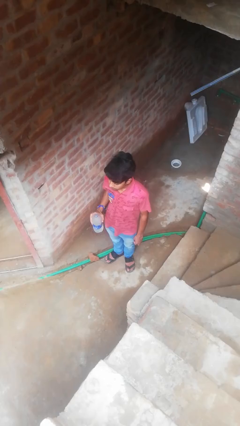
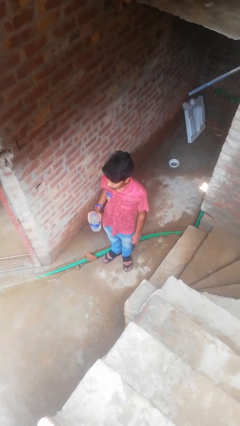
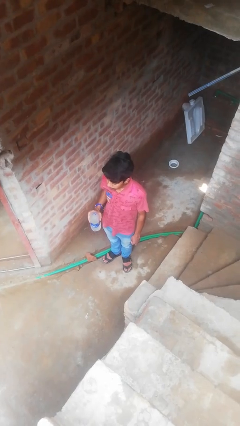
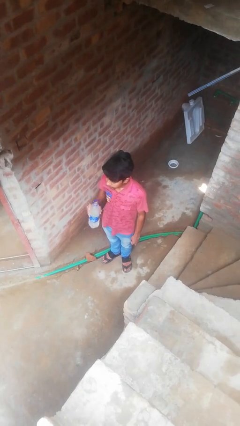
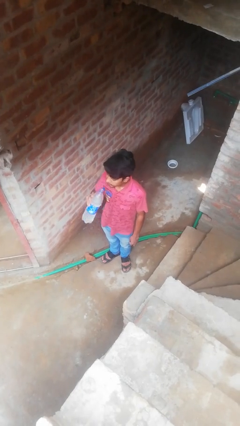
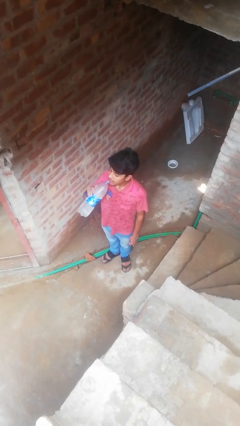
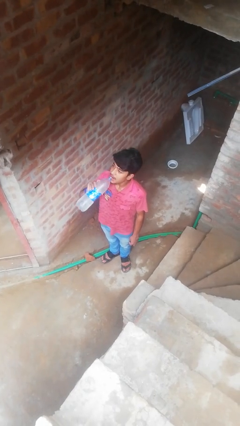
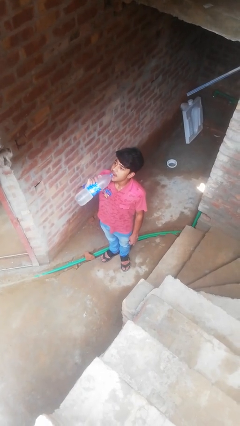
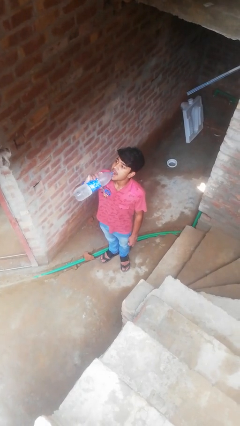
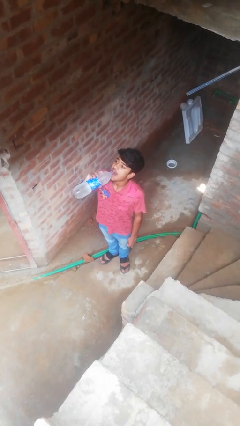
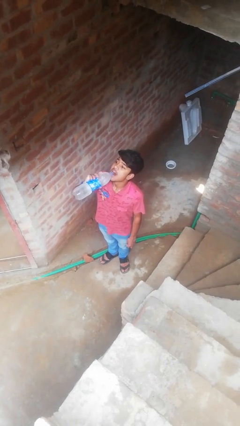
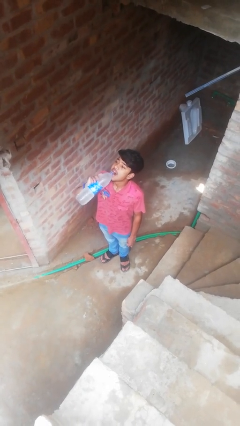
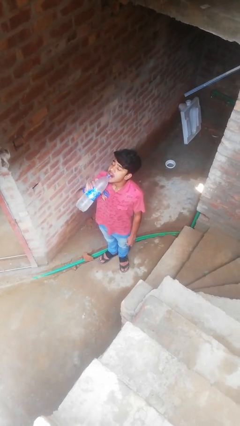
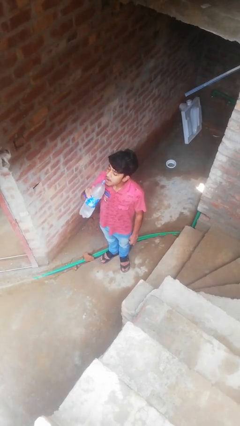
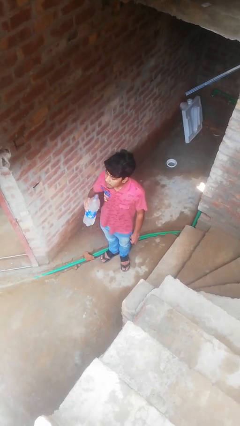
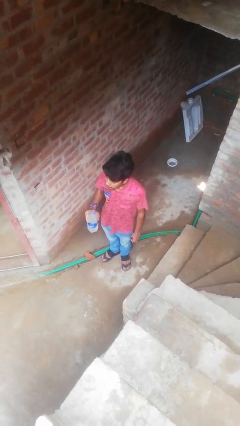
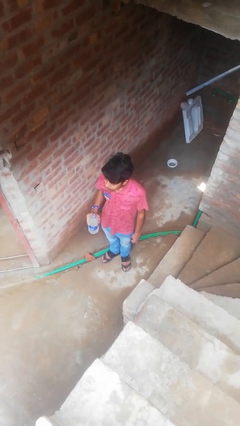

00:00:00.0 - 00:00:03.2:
person drinks from bottle

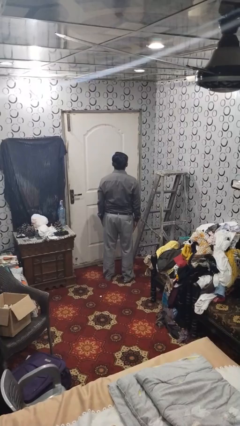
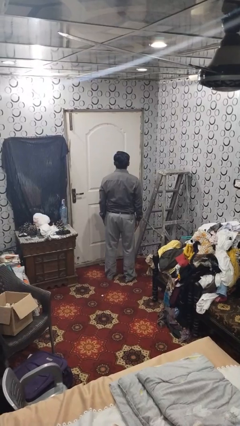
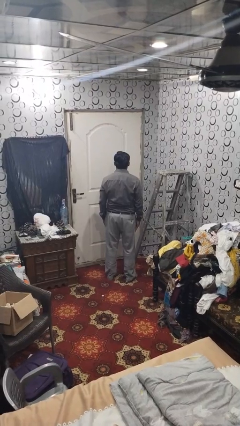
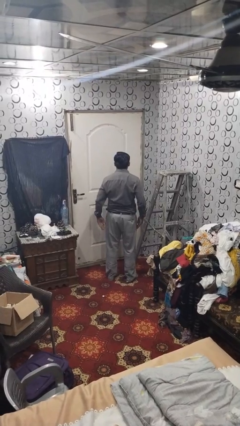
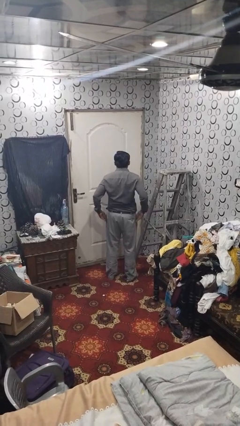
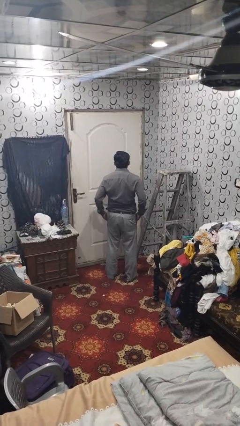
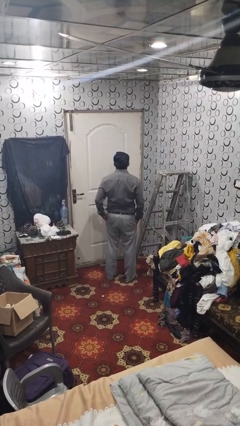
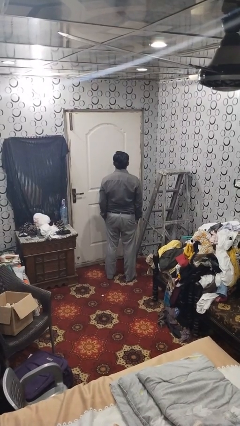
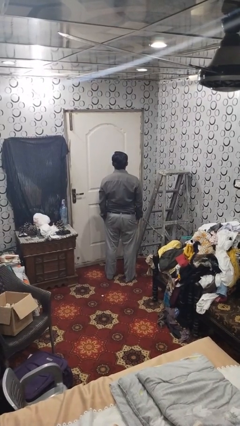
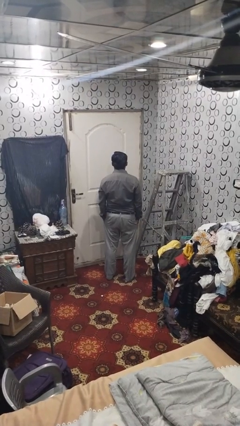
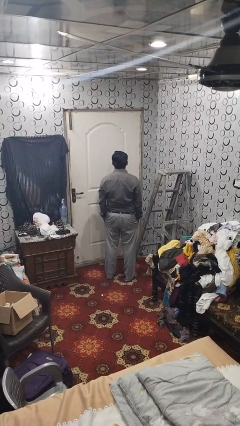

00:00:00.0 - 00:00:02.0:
person puts hands in back pockets

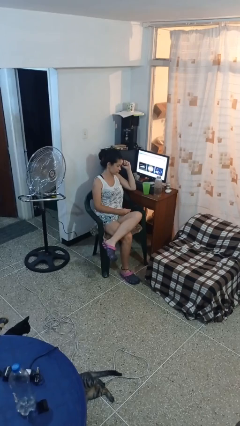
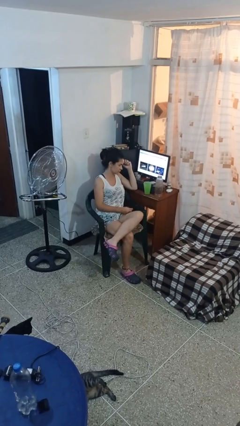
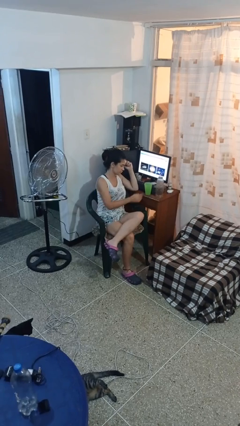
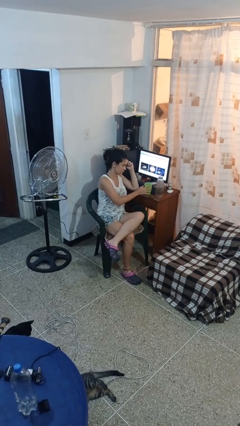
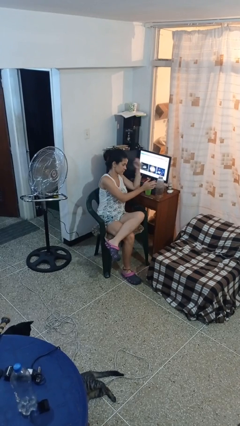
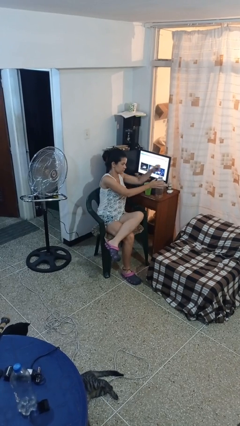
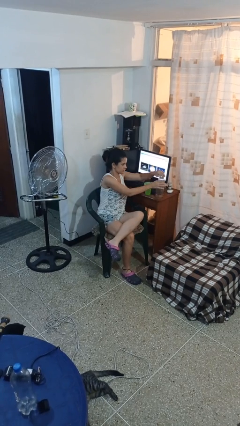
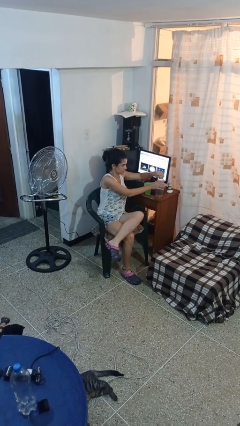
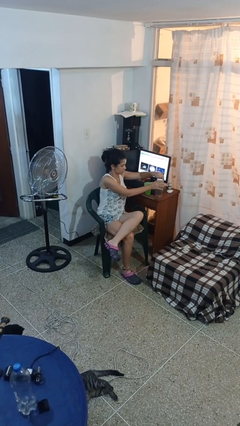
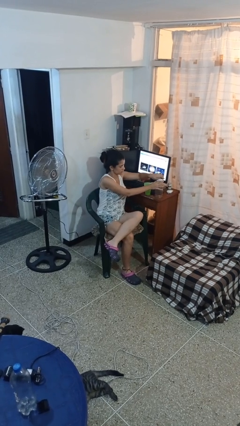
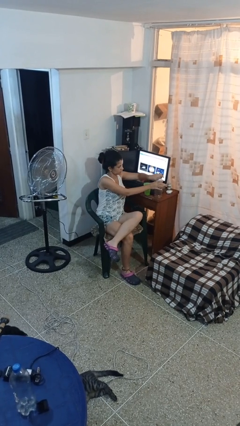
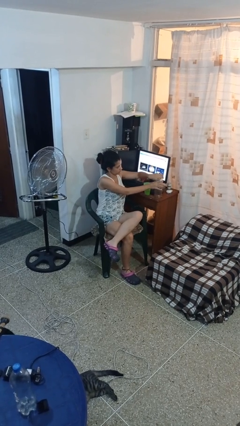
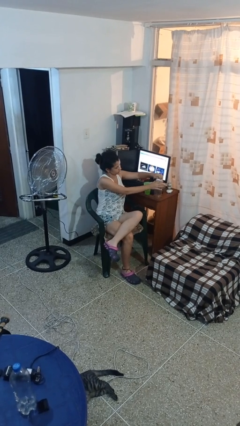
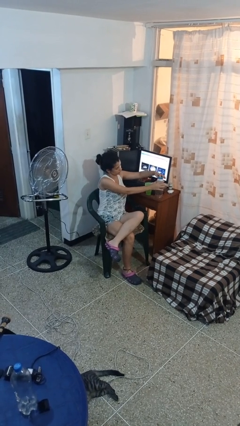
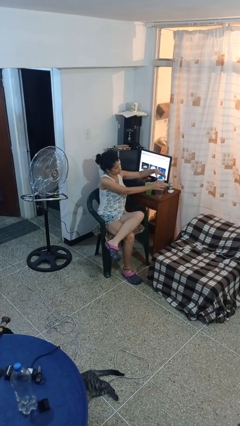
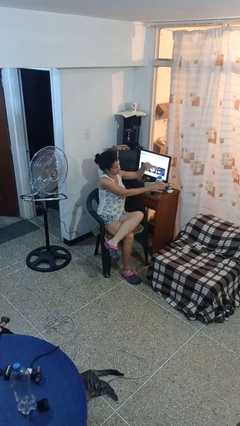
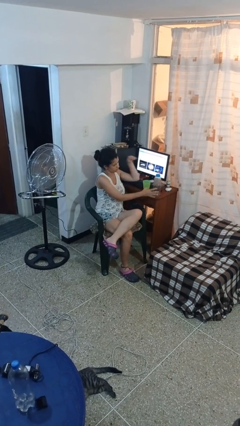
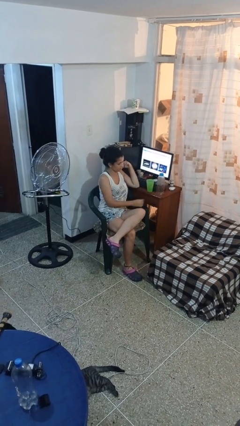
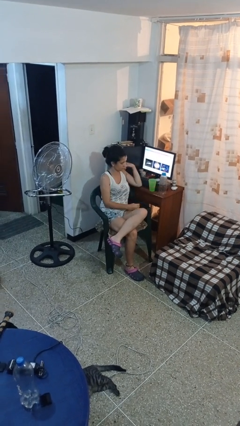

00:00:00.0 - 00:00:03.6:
person screws lid to bottle

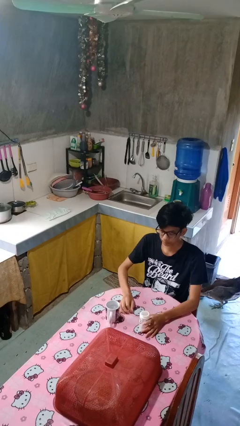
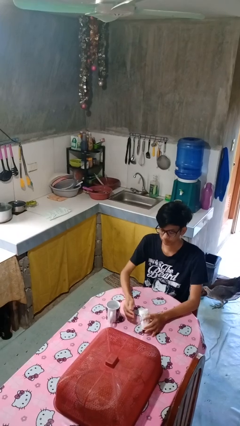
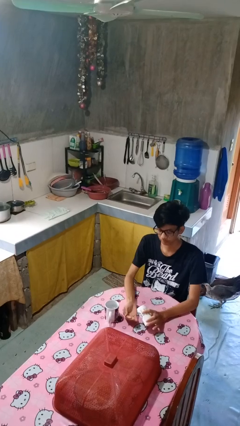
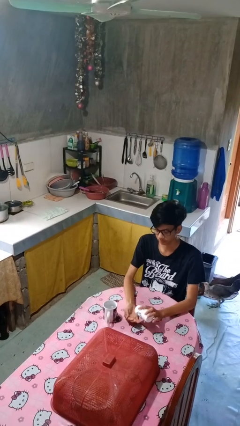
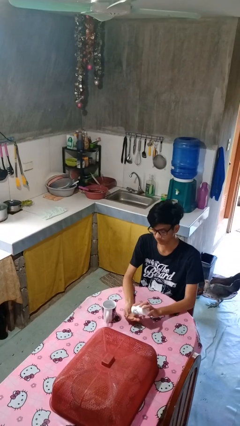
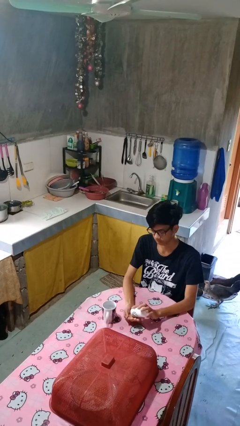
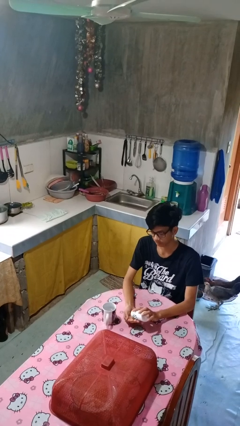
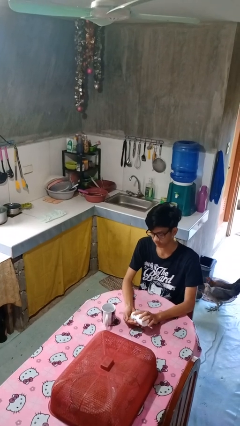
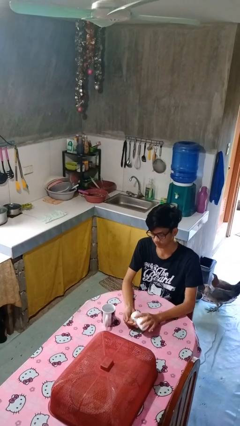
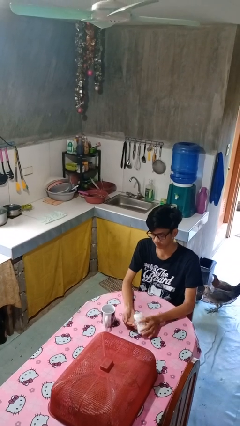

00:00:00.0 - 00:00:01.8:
person takes medicine pills

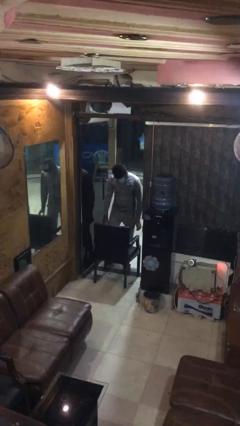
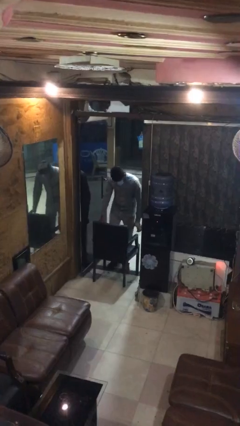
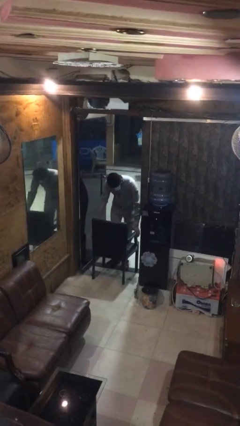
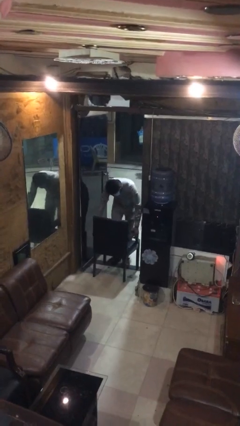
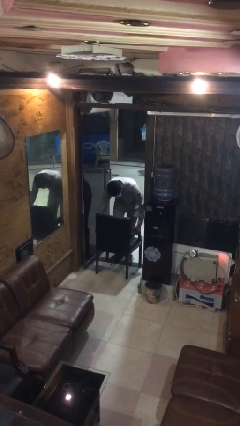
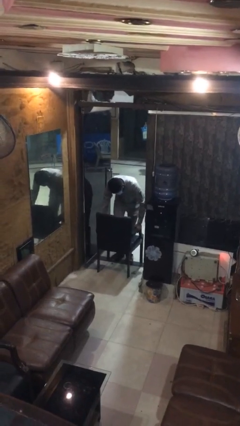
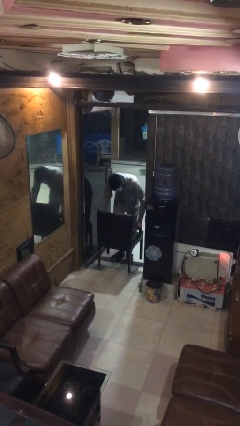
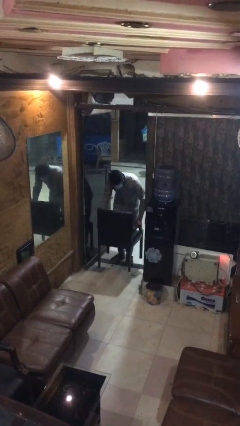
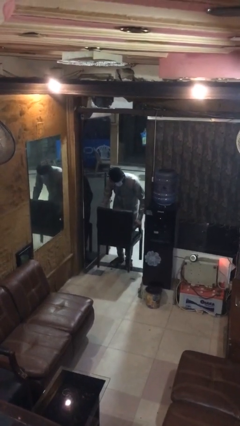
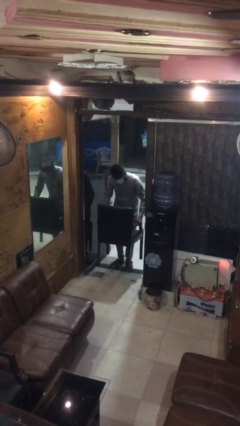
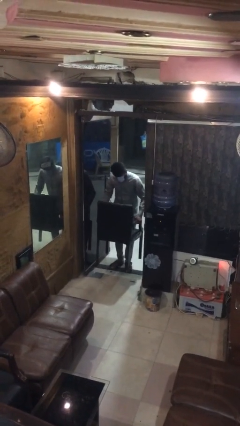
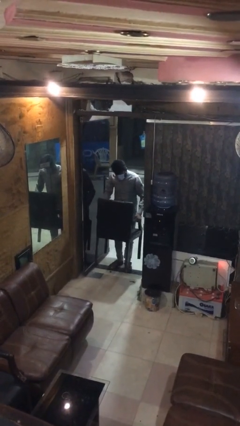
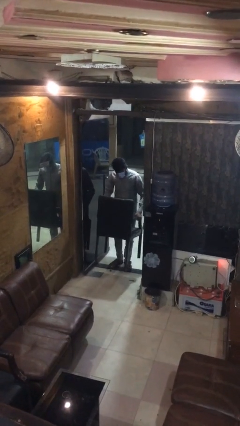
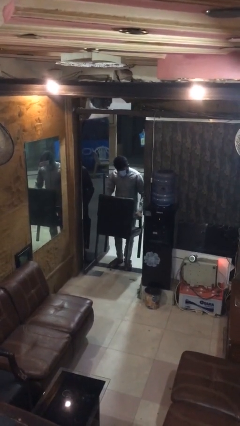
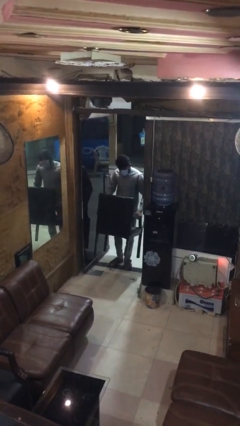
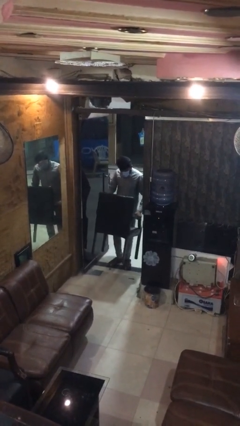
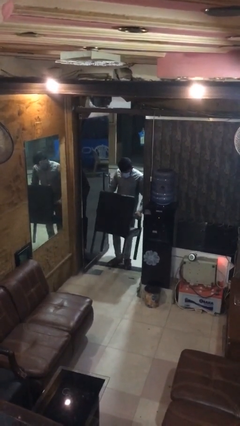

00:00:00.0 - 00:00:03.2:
person picks up object from floor

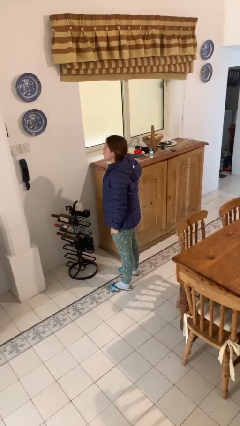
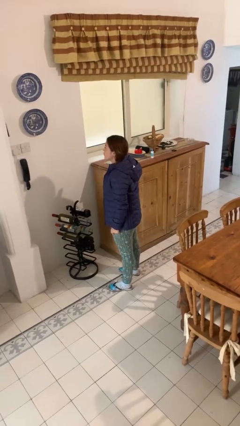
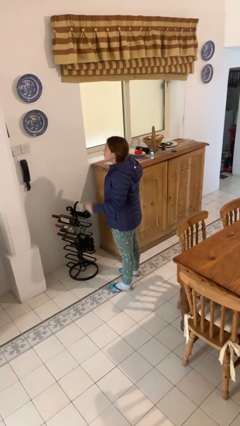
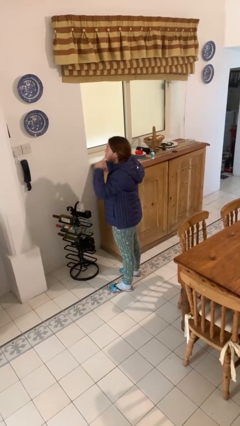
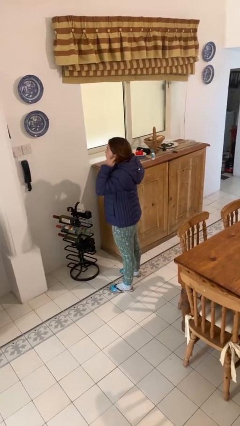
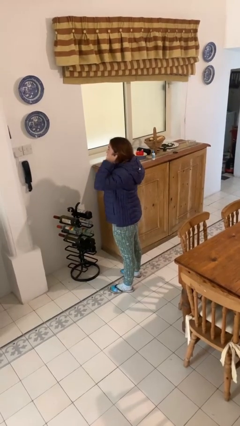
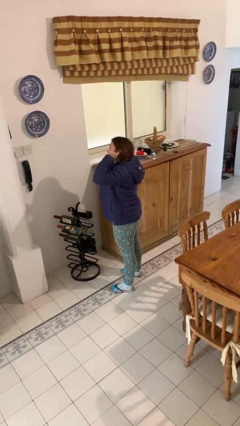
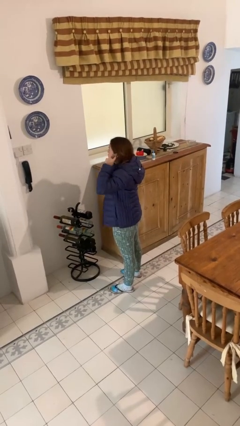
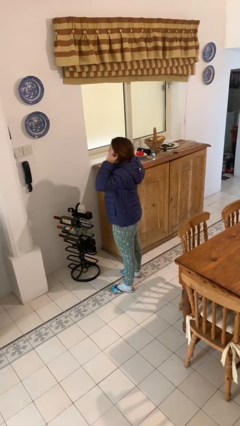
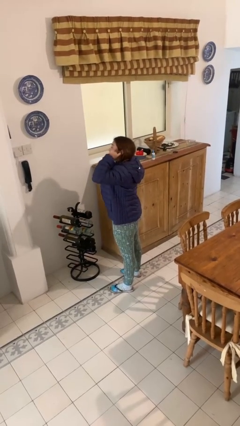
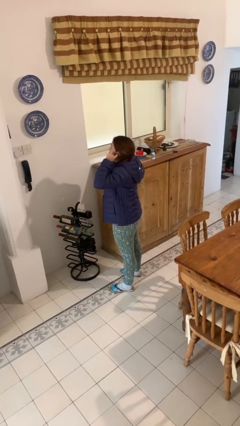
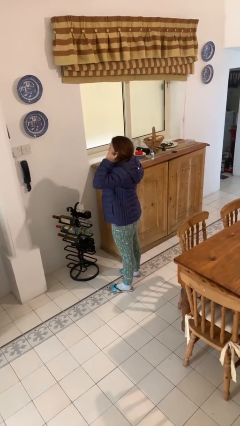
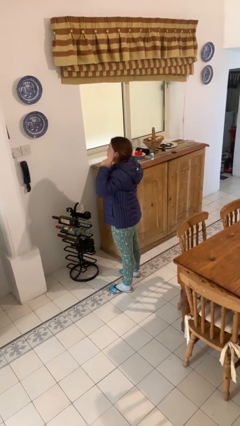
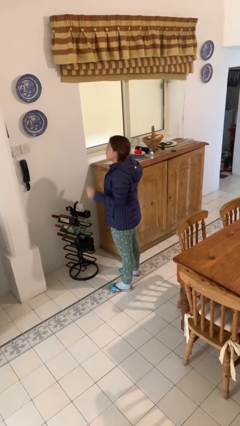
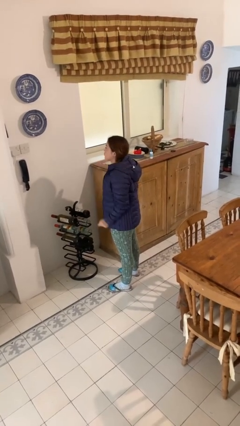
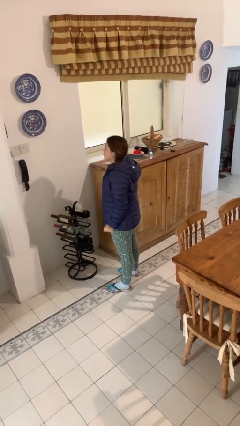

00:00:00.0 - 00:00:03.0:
person puts fingers in ear

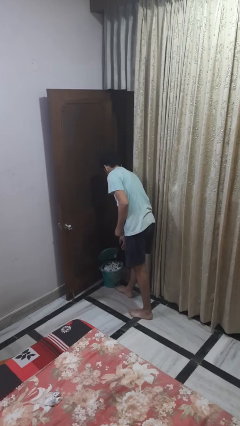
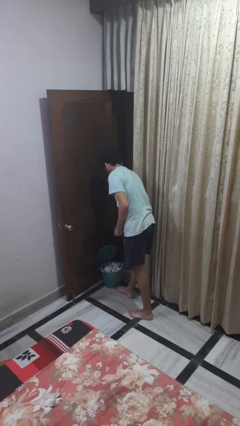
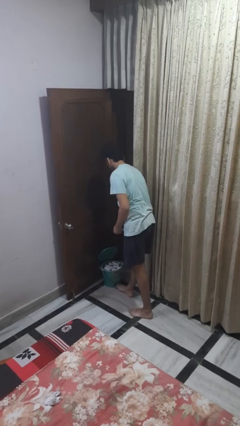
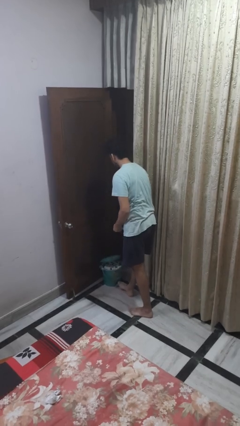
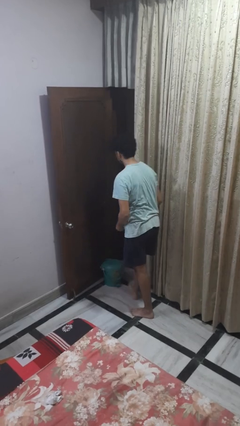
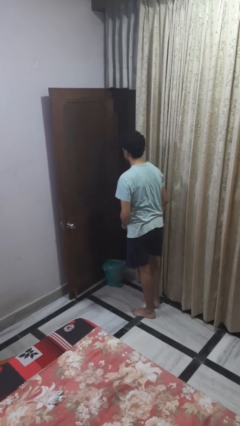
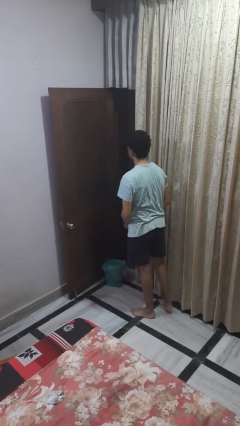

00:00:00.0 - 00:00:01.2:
person discards trash
